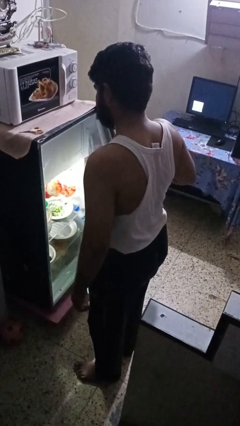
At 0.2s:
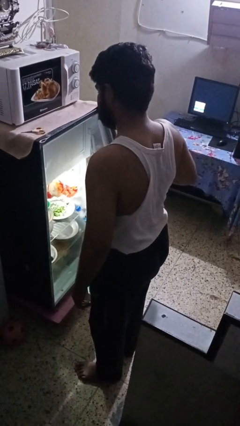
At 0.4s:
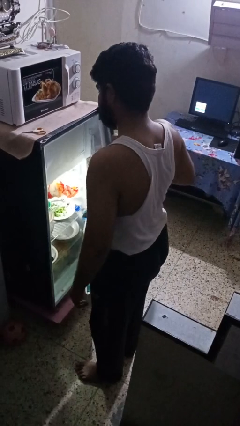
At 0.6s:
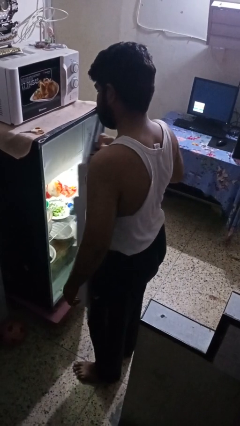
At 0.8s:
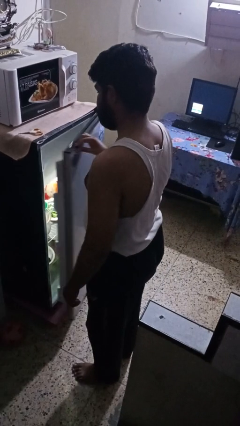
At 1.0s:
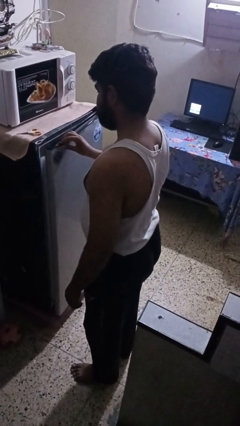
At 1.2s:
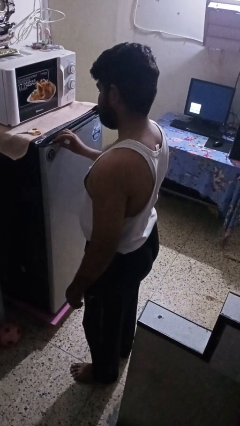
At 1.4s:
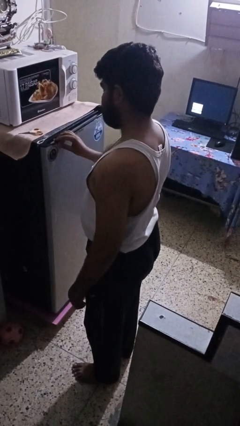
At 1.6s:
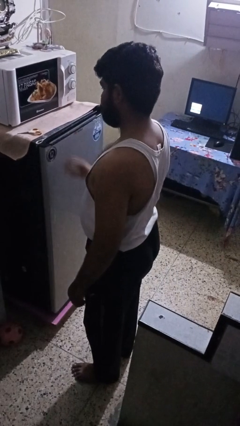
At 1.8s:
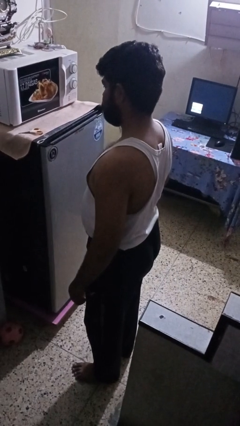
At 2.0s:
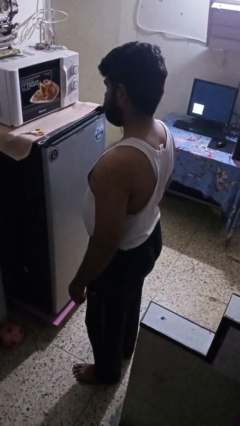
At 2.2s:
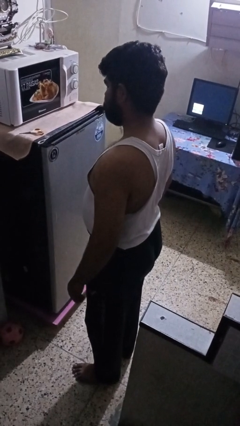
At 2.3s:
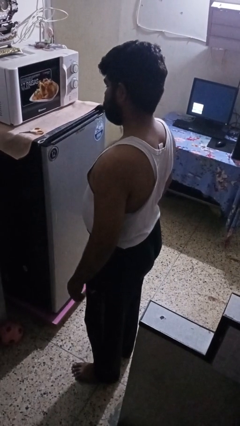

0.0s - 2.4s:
person closes refrigerator

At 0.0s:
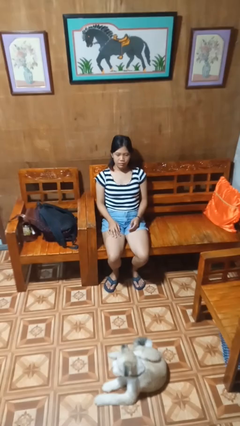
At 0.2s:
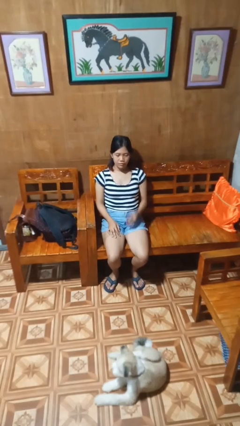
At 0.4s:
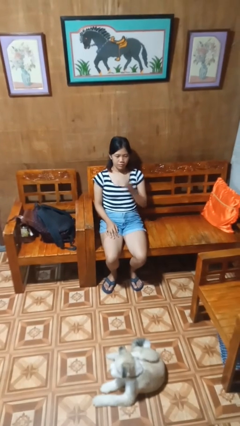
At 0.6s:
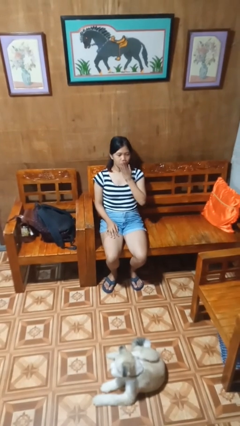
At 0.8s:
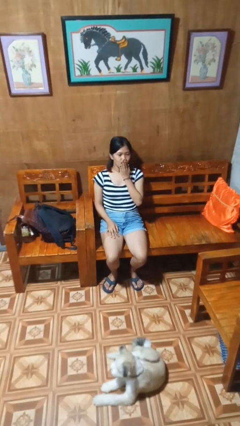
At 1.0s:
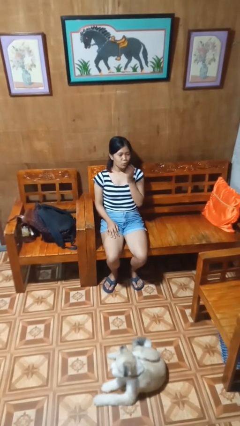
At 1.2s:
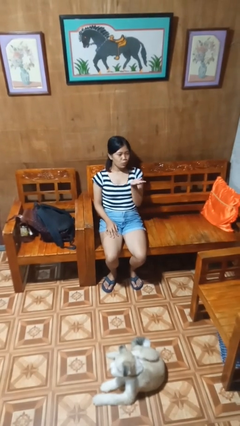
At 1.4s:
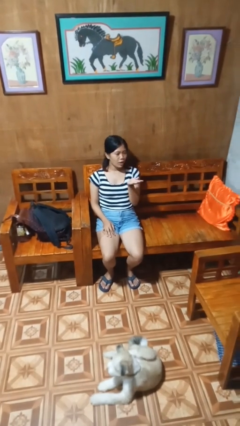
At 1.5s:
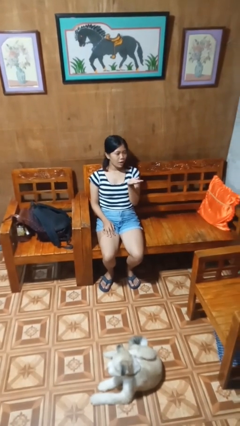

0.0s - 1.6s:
person gestures blow kiss

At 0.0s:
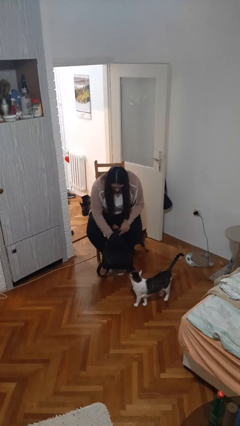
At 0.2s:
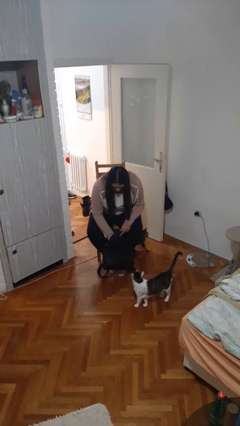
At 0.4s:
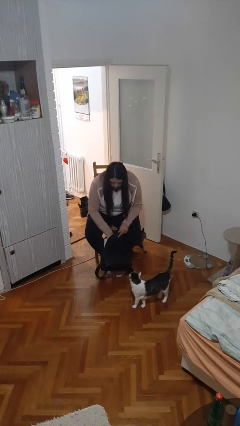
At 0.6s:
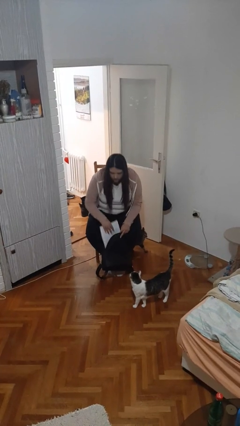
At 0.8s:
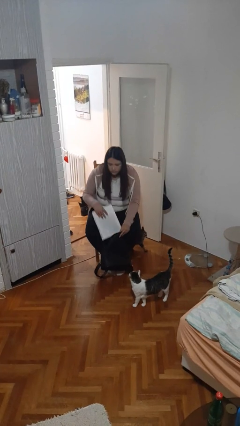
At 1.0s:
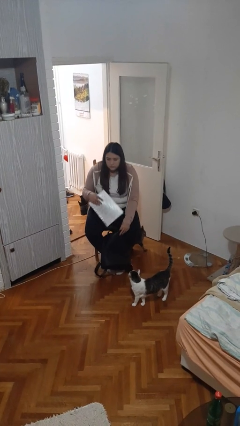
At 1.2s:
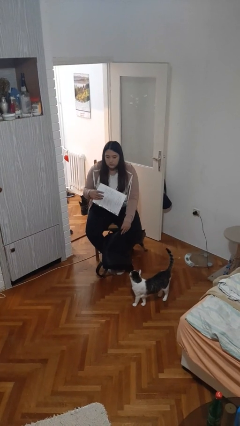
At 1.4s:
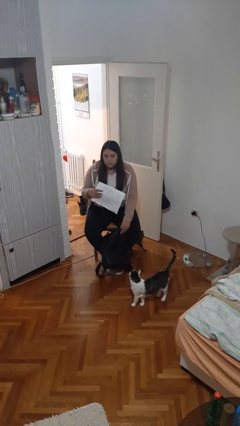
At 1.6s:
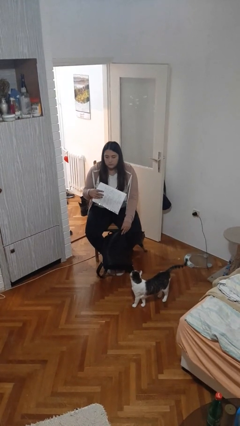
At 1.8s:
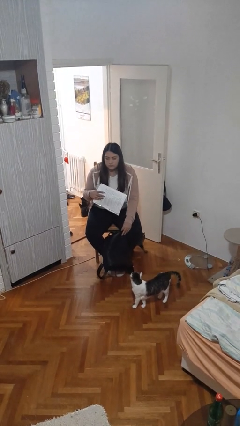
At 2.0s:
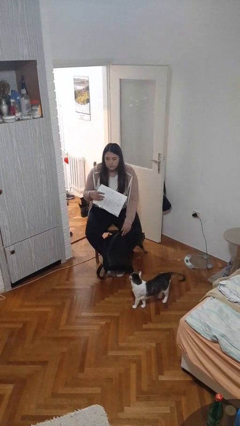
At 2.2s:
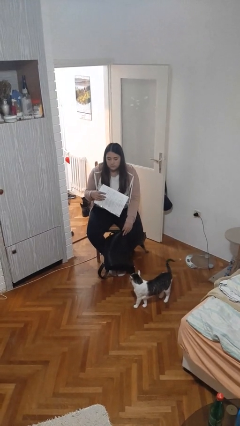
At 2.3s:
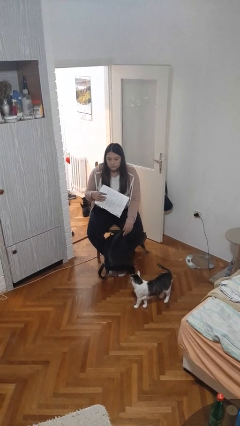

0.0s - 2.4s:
person takes object from backpack

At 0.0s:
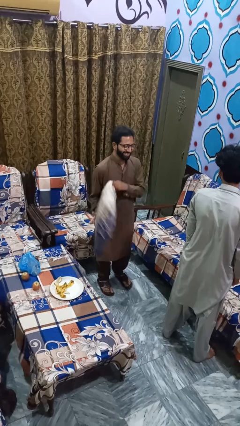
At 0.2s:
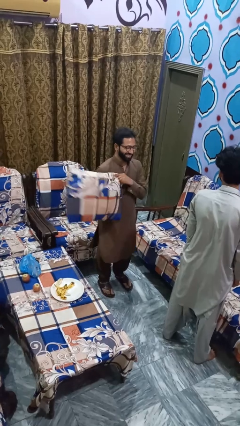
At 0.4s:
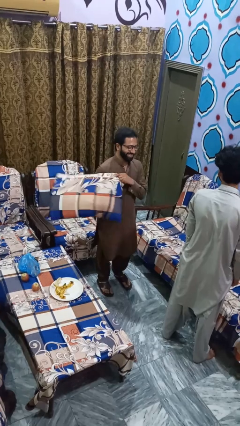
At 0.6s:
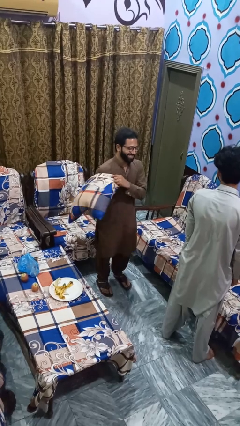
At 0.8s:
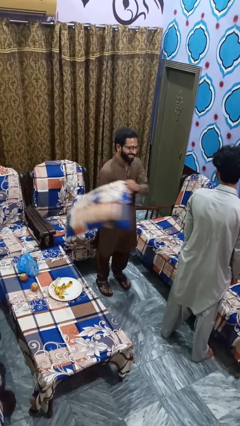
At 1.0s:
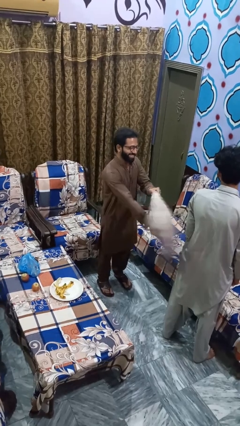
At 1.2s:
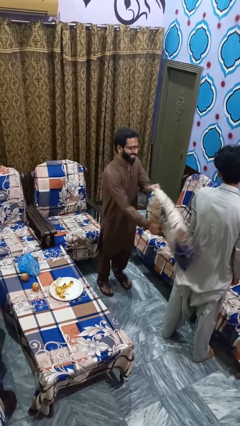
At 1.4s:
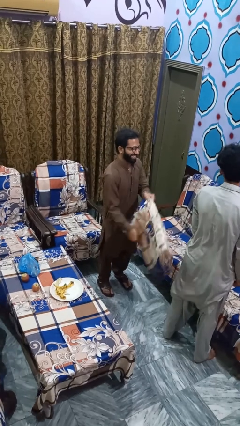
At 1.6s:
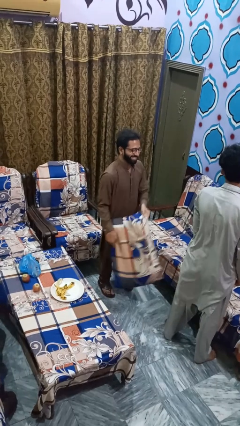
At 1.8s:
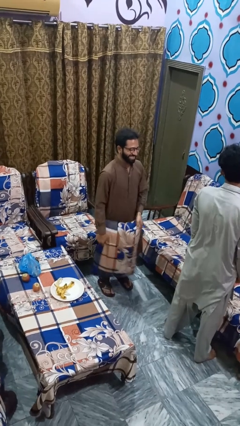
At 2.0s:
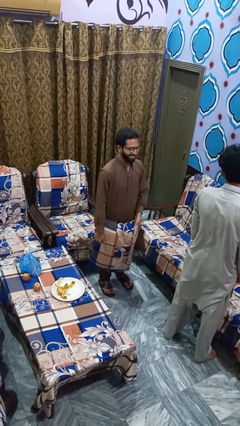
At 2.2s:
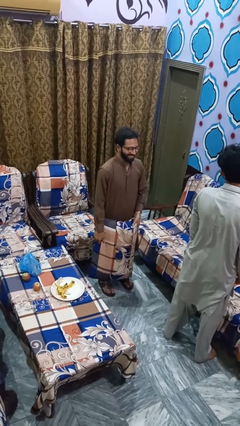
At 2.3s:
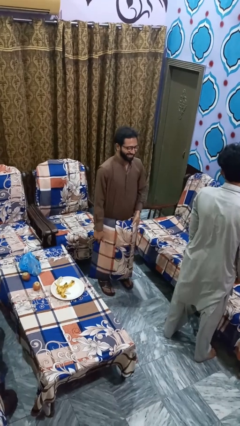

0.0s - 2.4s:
person hits person with pillow

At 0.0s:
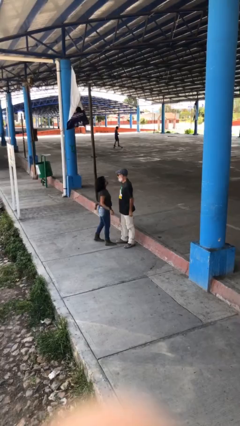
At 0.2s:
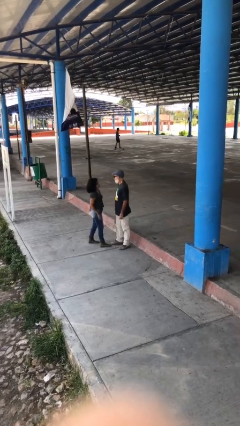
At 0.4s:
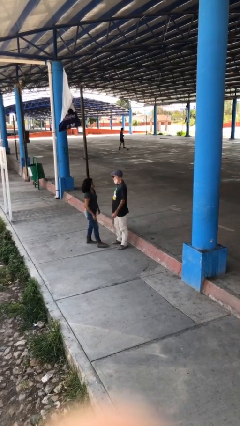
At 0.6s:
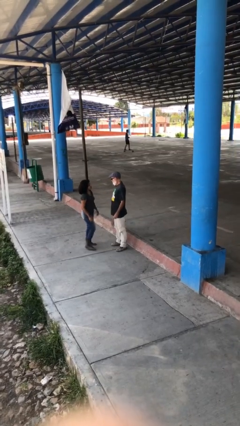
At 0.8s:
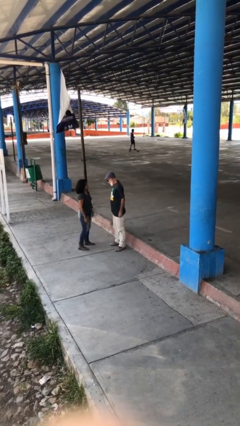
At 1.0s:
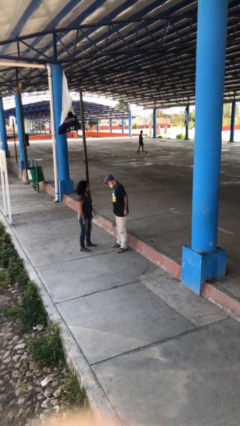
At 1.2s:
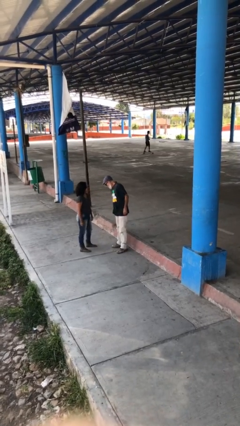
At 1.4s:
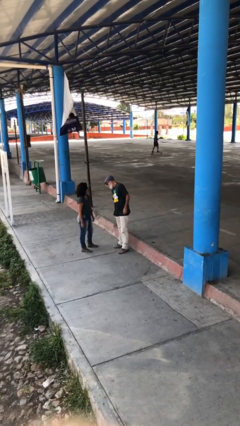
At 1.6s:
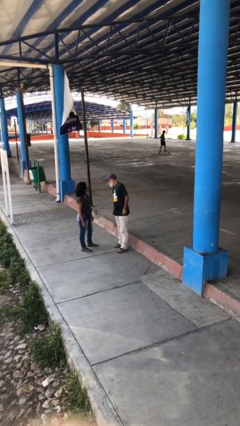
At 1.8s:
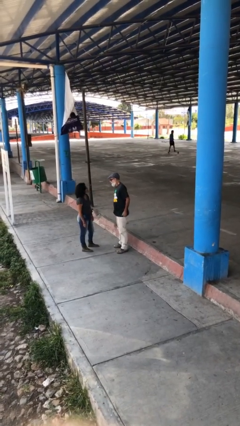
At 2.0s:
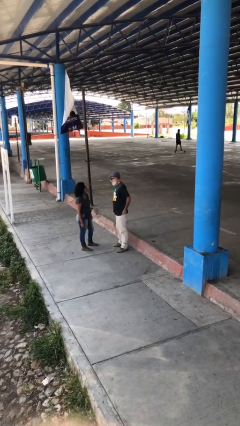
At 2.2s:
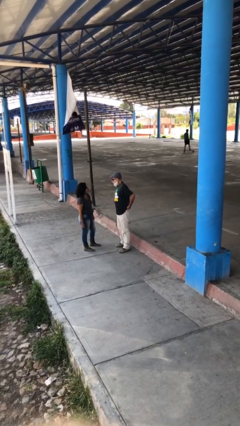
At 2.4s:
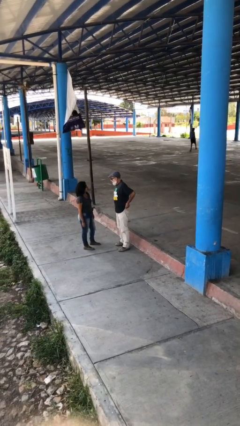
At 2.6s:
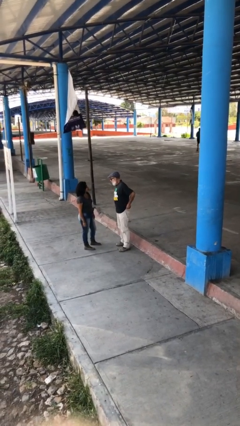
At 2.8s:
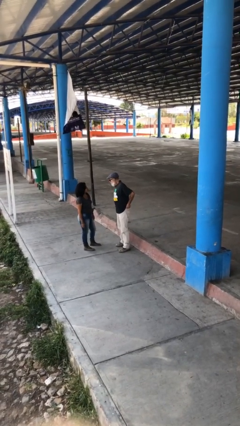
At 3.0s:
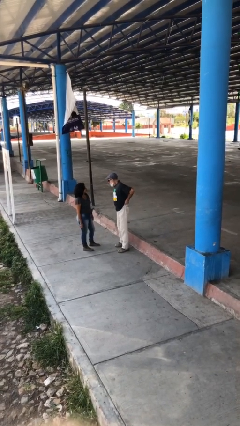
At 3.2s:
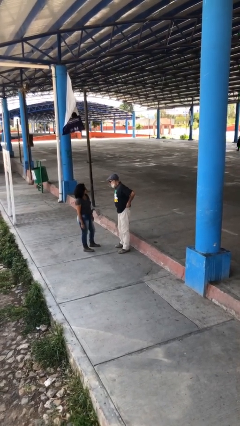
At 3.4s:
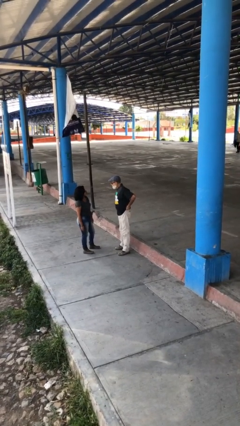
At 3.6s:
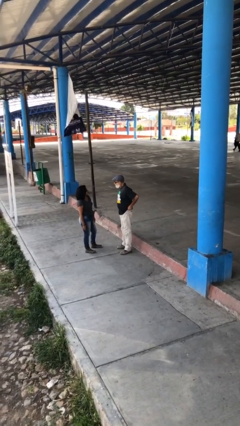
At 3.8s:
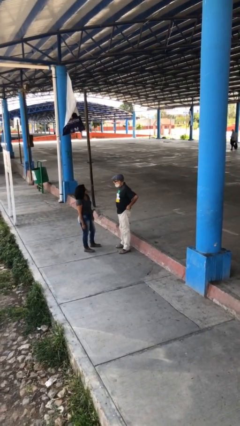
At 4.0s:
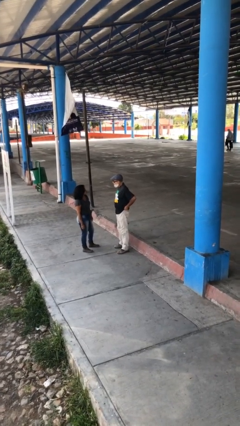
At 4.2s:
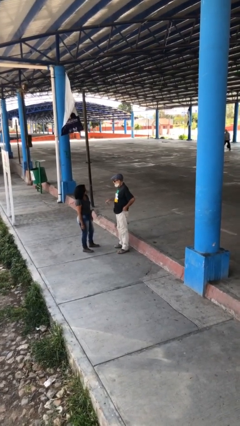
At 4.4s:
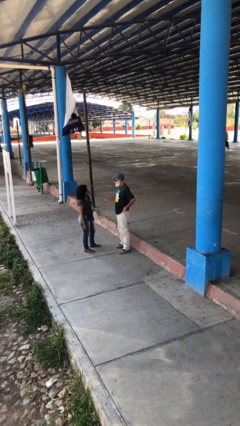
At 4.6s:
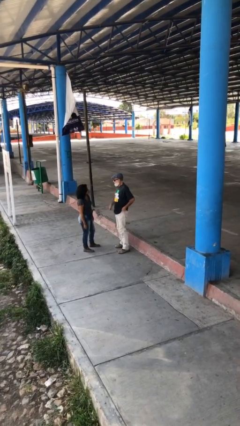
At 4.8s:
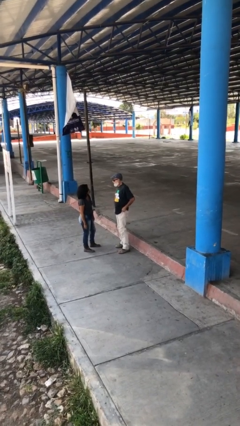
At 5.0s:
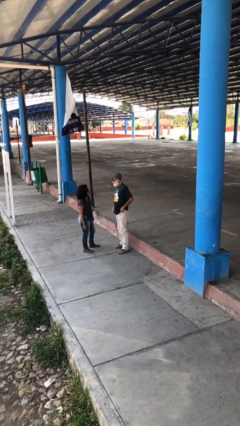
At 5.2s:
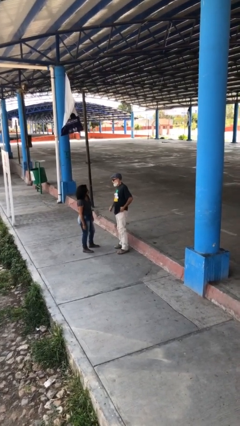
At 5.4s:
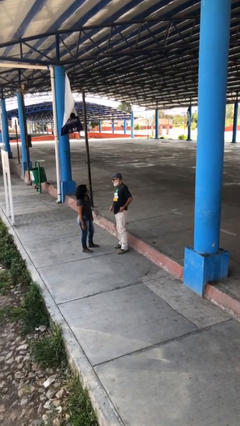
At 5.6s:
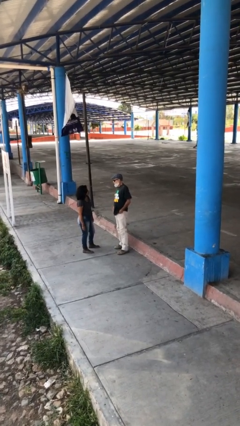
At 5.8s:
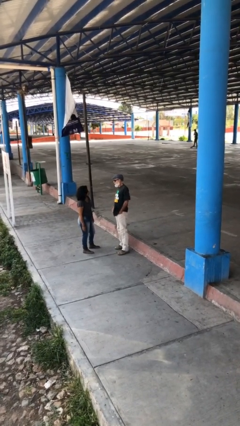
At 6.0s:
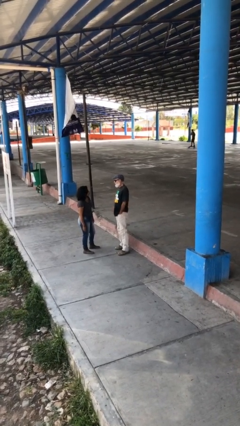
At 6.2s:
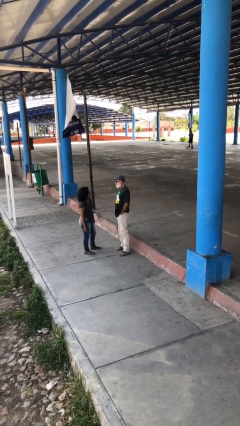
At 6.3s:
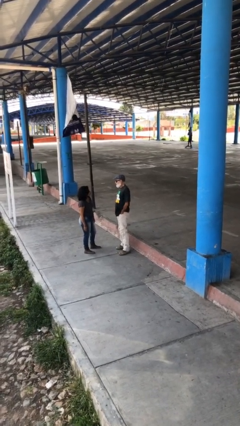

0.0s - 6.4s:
person talks to person

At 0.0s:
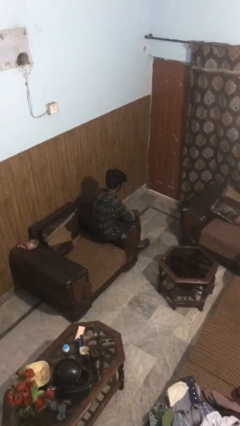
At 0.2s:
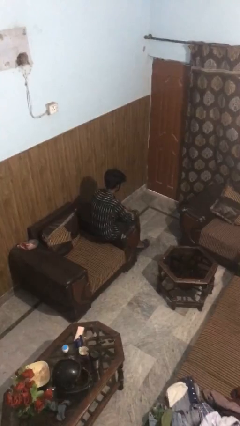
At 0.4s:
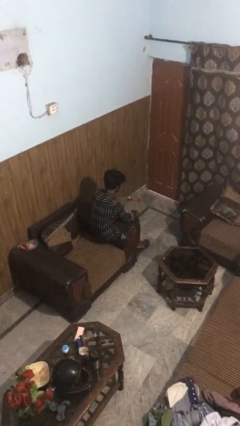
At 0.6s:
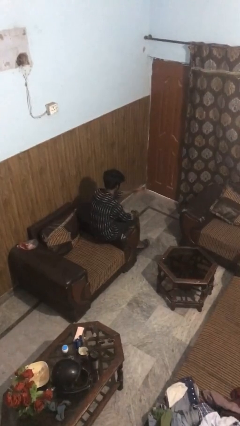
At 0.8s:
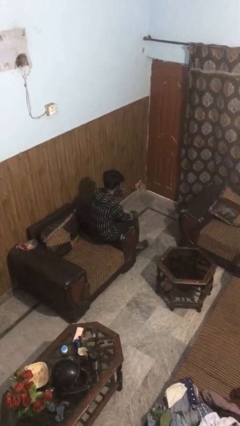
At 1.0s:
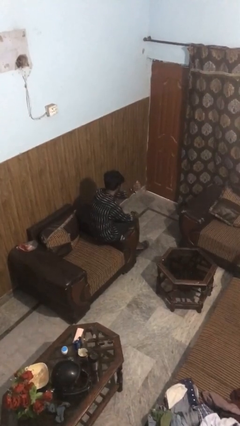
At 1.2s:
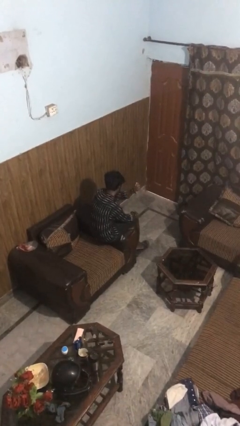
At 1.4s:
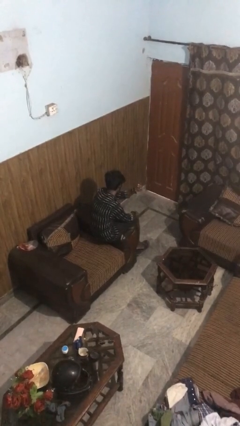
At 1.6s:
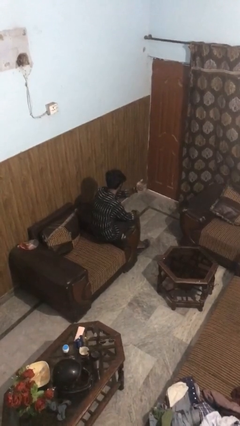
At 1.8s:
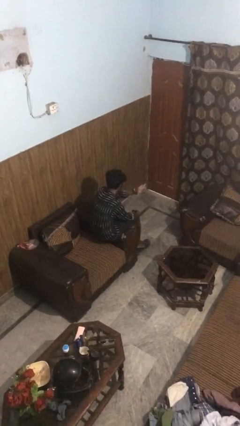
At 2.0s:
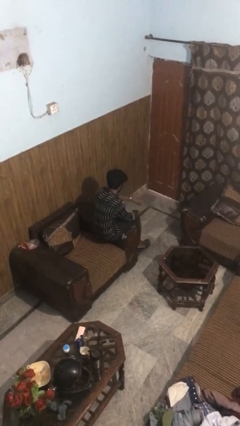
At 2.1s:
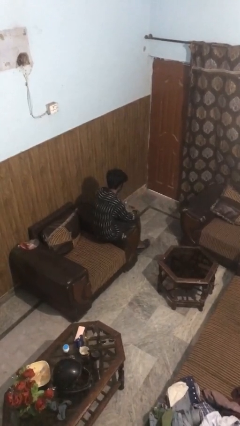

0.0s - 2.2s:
person snaps fingers

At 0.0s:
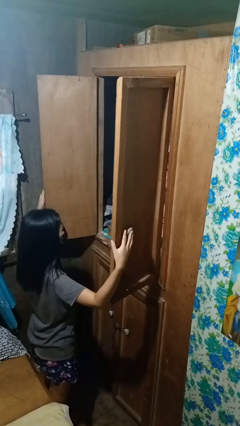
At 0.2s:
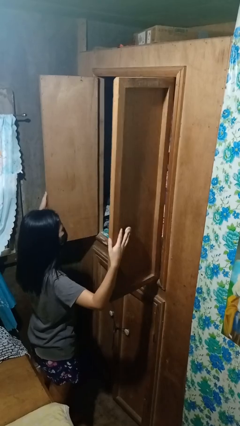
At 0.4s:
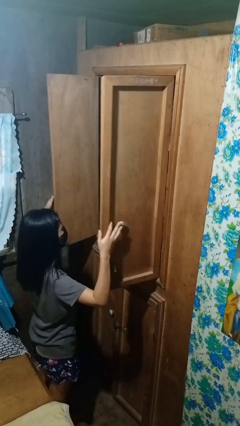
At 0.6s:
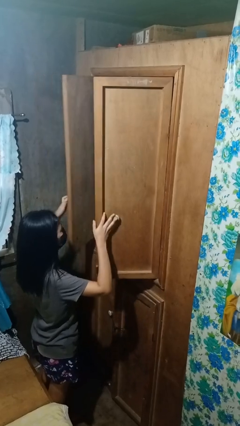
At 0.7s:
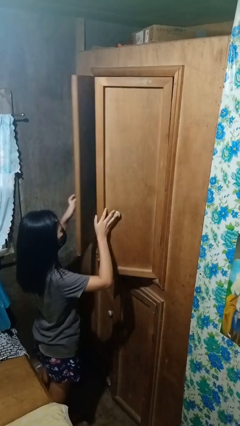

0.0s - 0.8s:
person closes closet door
